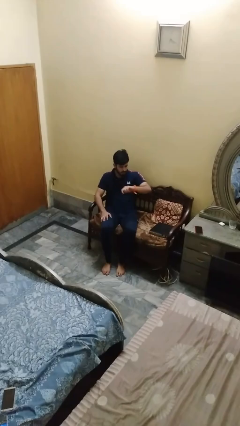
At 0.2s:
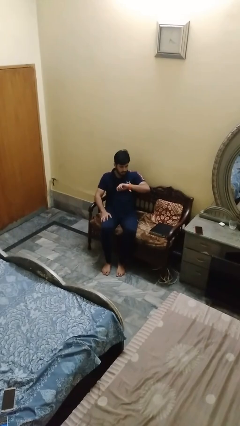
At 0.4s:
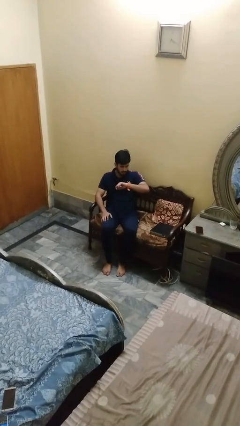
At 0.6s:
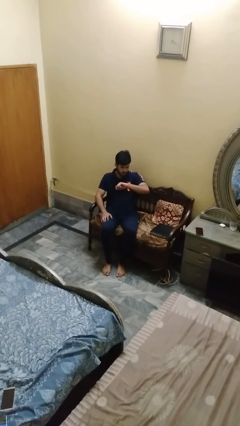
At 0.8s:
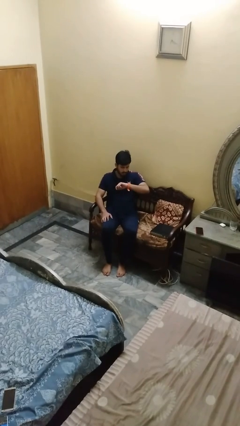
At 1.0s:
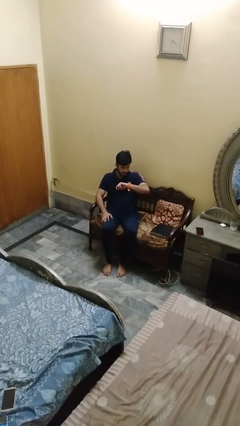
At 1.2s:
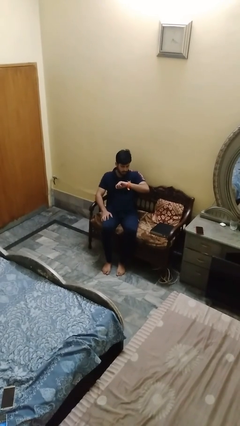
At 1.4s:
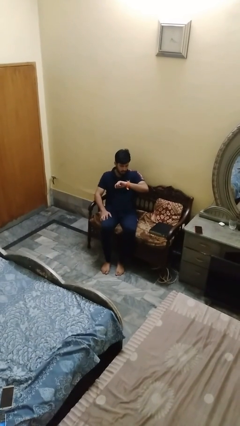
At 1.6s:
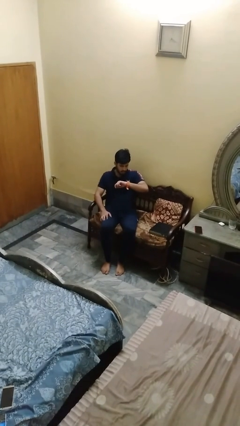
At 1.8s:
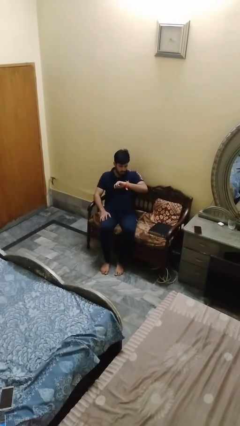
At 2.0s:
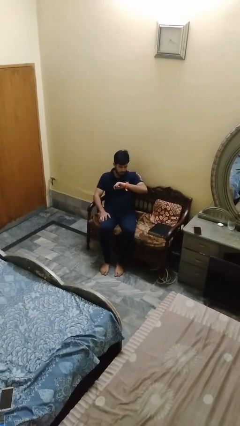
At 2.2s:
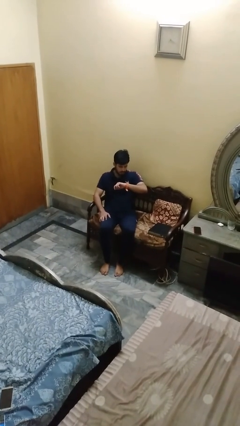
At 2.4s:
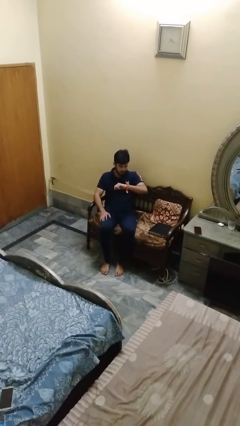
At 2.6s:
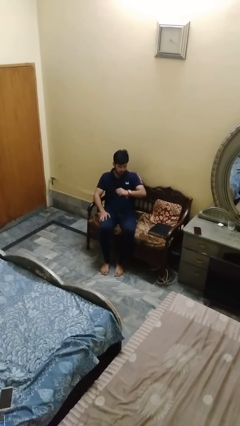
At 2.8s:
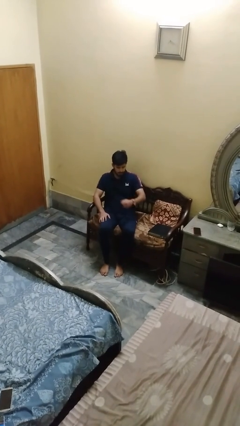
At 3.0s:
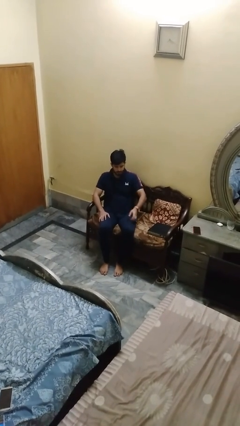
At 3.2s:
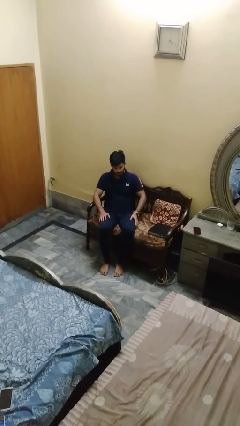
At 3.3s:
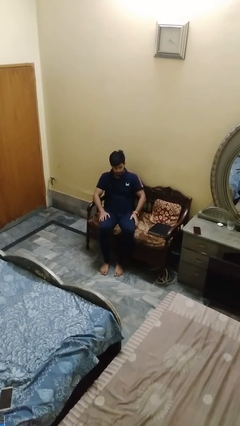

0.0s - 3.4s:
person looks at wristwatch

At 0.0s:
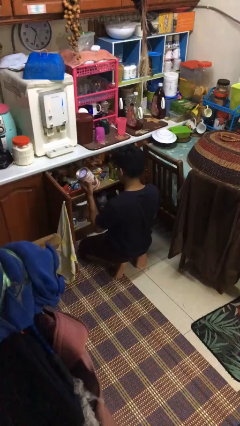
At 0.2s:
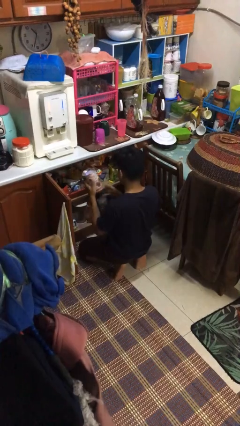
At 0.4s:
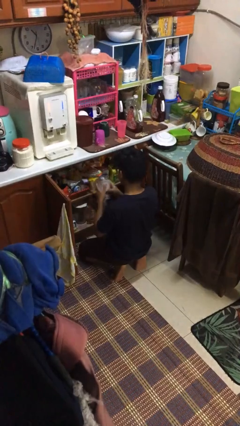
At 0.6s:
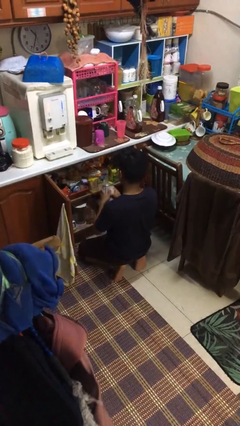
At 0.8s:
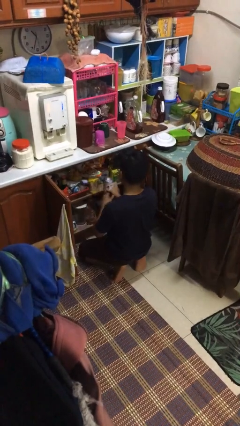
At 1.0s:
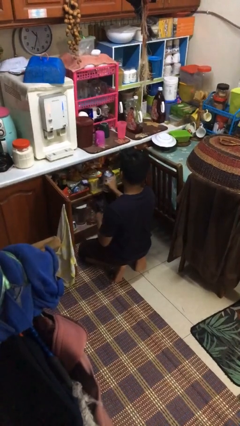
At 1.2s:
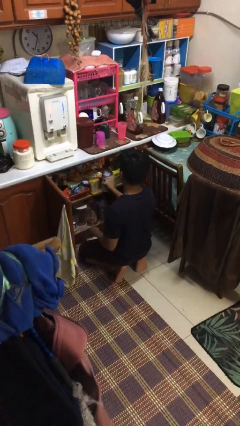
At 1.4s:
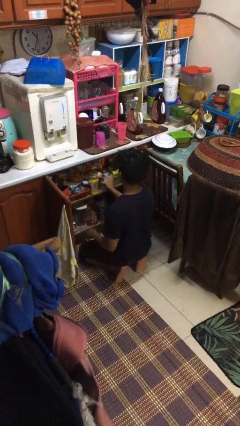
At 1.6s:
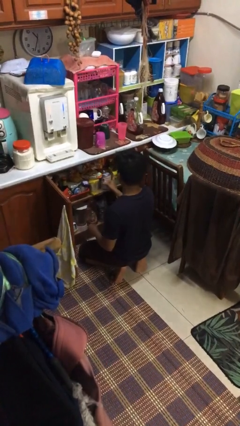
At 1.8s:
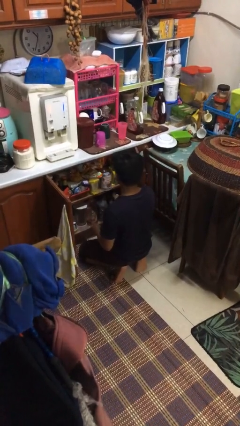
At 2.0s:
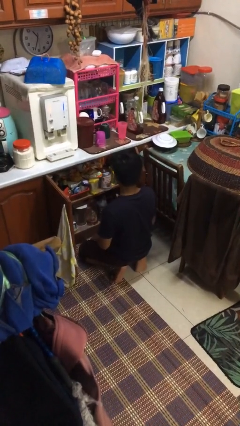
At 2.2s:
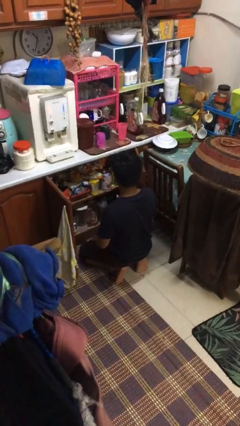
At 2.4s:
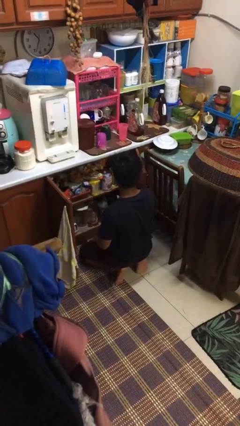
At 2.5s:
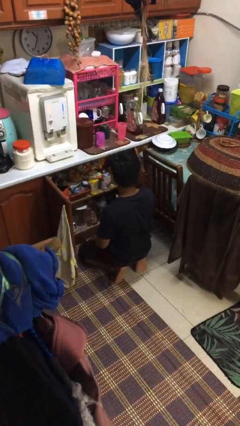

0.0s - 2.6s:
person puts object in cabinet

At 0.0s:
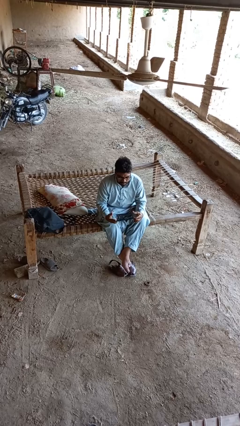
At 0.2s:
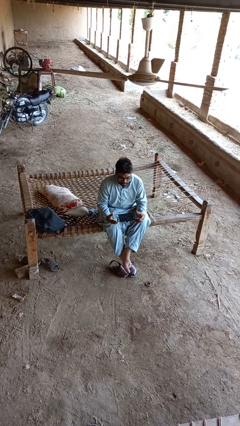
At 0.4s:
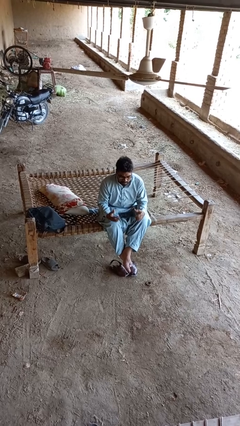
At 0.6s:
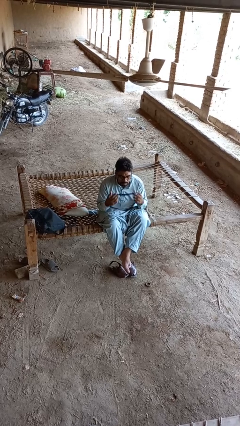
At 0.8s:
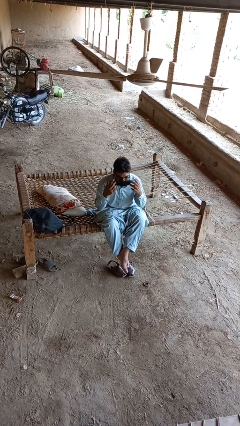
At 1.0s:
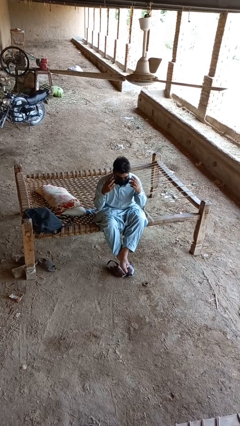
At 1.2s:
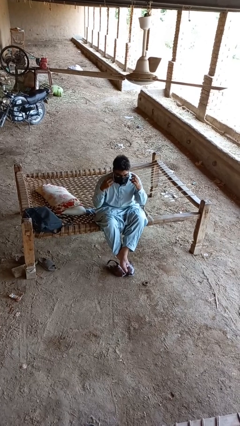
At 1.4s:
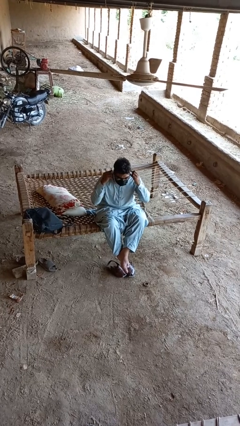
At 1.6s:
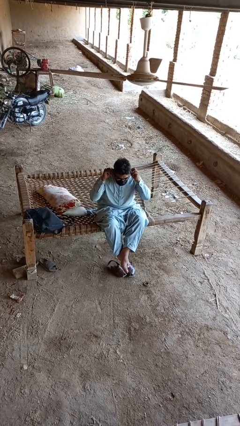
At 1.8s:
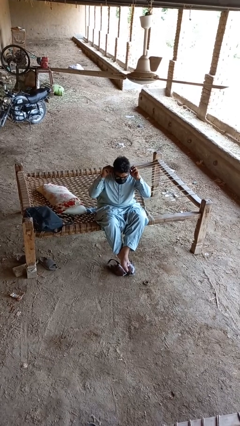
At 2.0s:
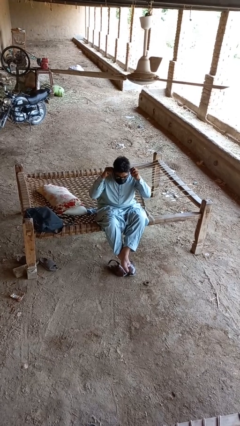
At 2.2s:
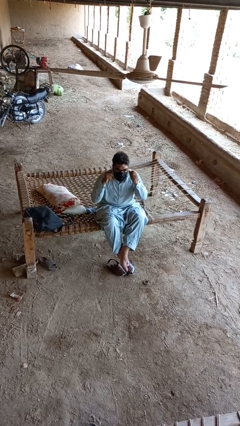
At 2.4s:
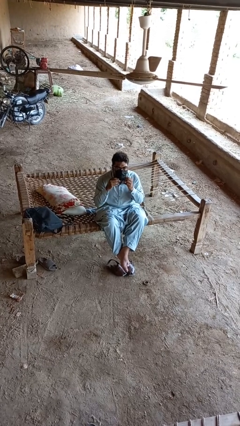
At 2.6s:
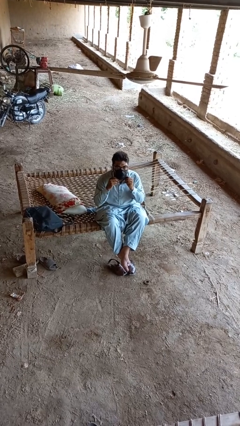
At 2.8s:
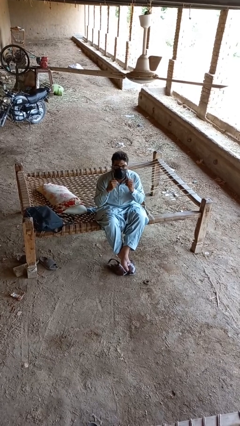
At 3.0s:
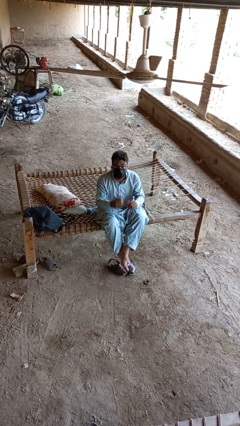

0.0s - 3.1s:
person puts on facemask

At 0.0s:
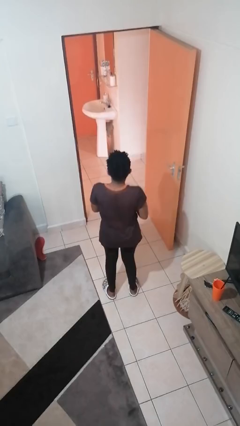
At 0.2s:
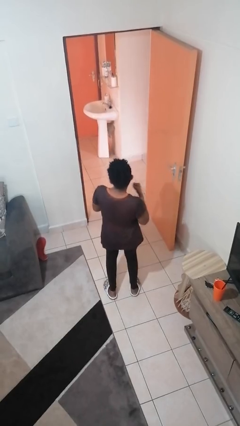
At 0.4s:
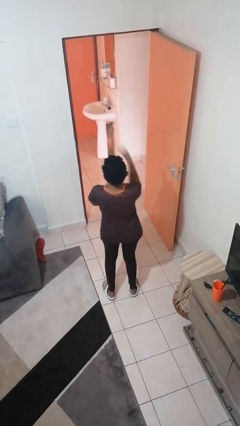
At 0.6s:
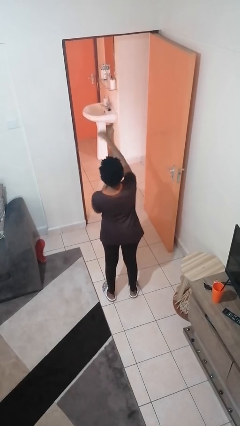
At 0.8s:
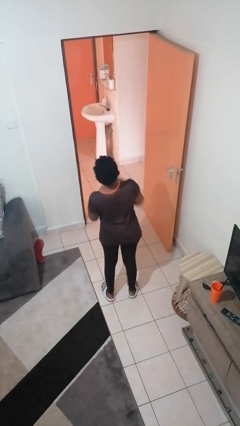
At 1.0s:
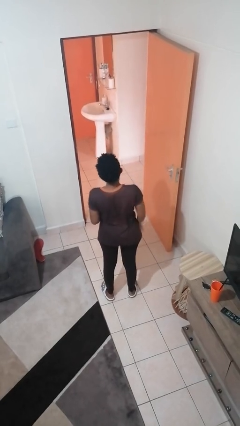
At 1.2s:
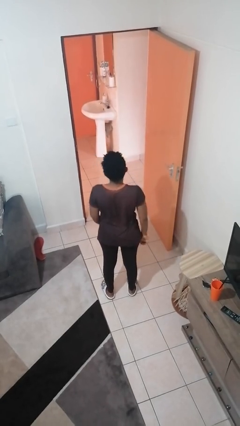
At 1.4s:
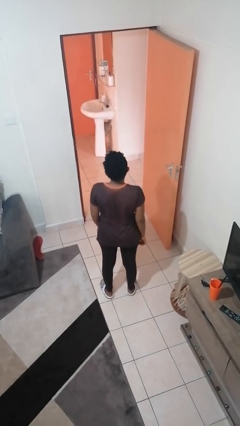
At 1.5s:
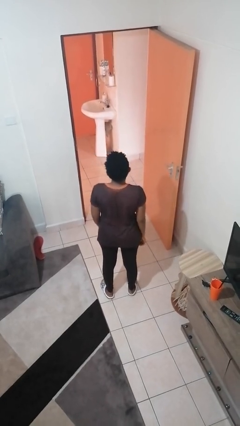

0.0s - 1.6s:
person punches

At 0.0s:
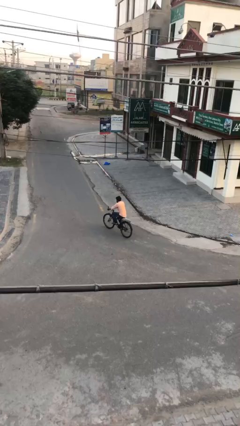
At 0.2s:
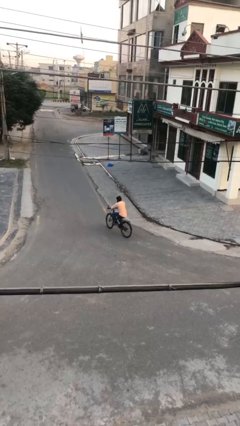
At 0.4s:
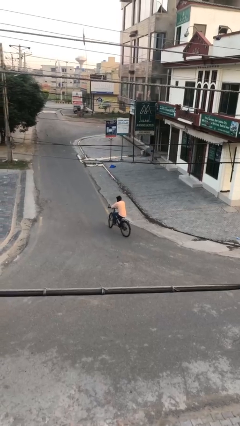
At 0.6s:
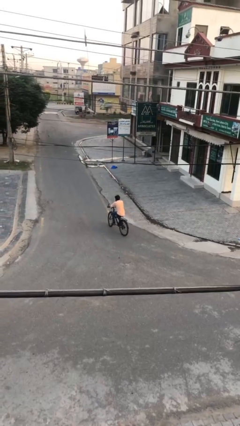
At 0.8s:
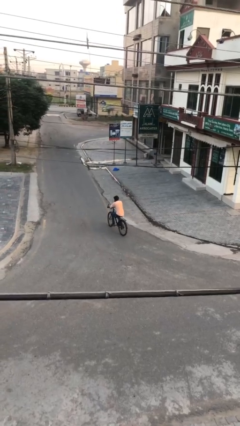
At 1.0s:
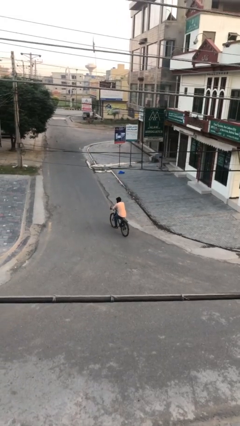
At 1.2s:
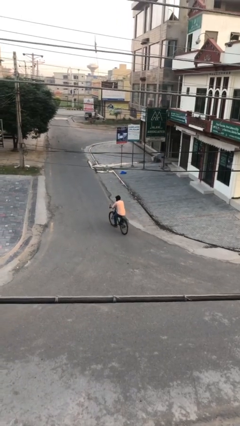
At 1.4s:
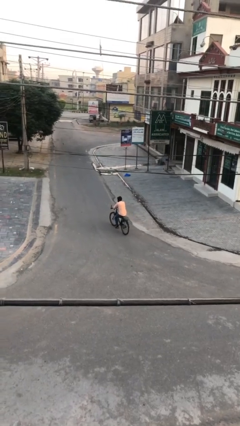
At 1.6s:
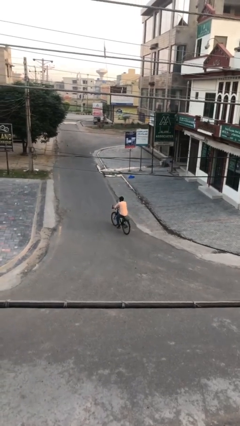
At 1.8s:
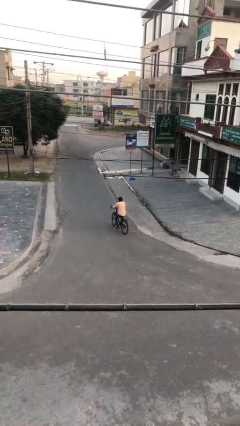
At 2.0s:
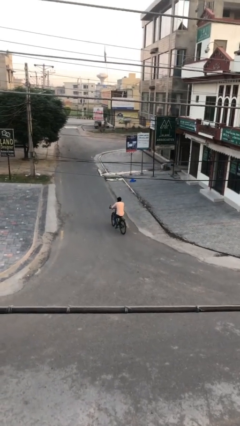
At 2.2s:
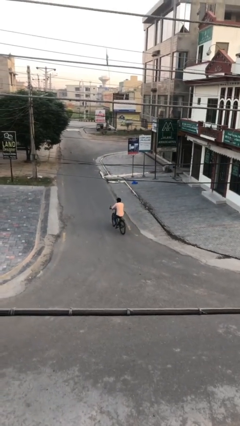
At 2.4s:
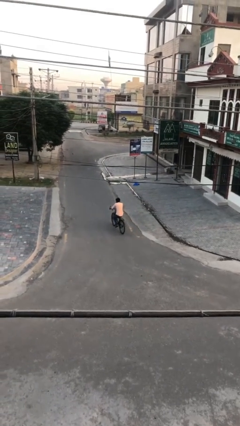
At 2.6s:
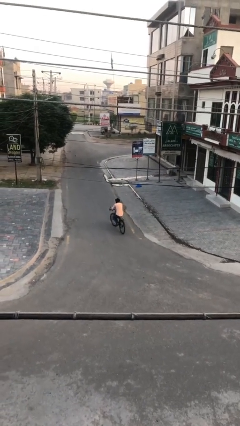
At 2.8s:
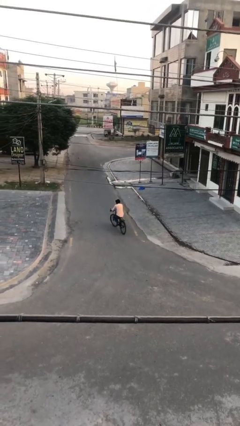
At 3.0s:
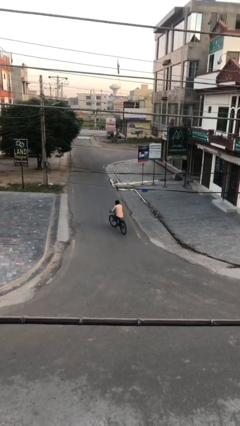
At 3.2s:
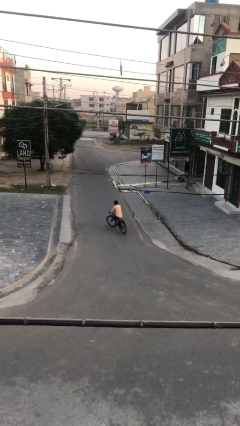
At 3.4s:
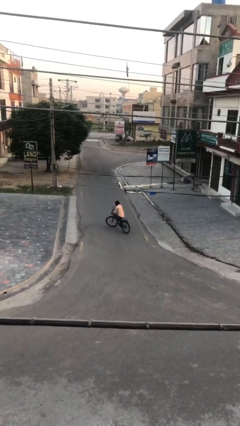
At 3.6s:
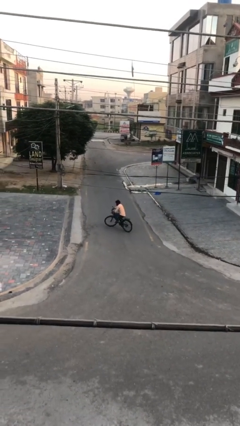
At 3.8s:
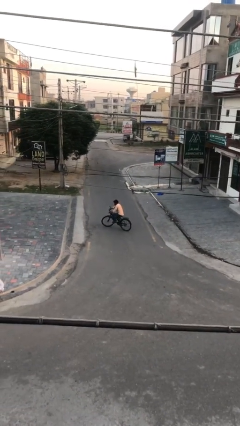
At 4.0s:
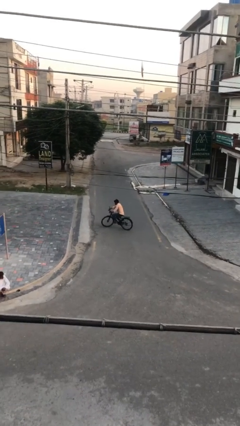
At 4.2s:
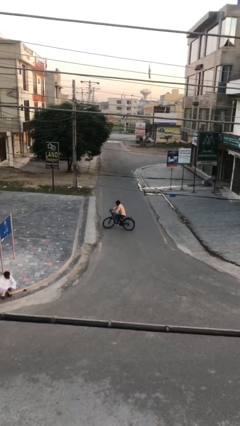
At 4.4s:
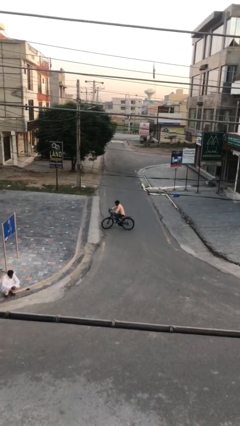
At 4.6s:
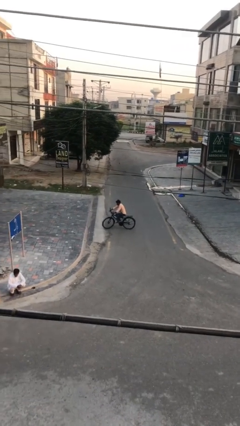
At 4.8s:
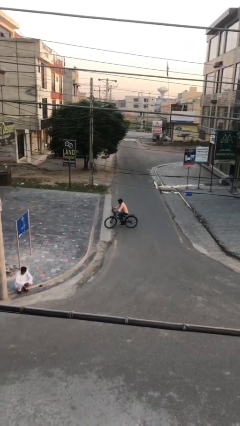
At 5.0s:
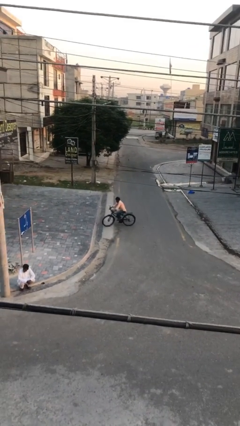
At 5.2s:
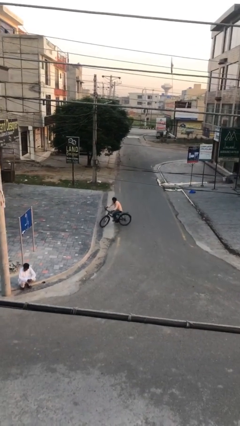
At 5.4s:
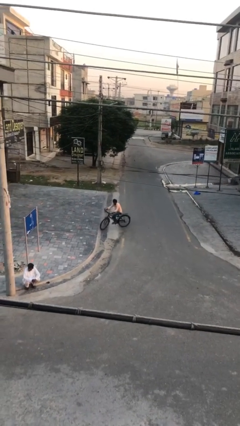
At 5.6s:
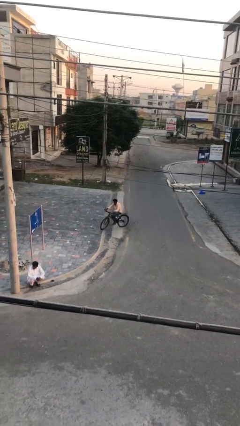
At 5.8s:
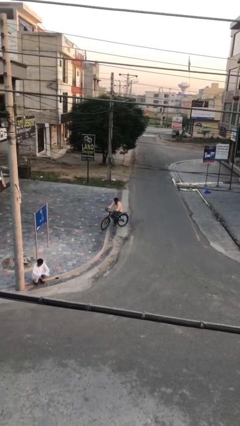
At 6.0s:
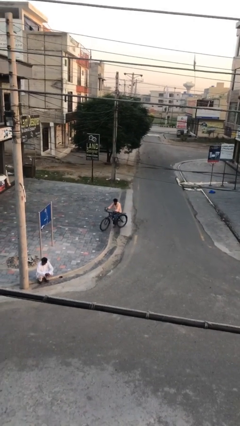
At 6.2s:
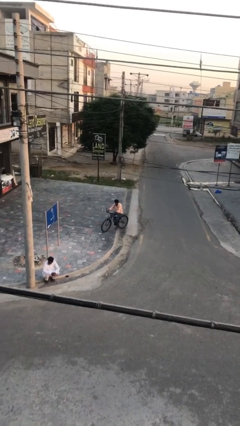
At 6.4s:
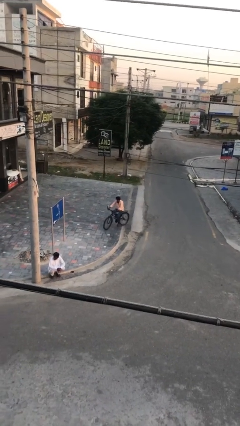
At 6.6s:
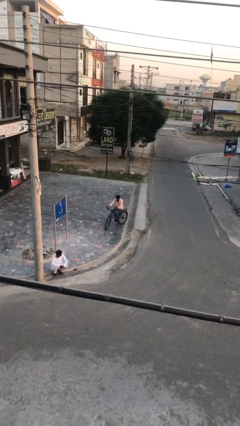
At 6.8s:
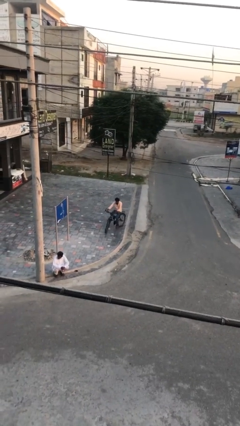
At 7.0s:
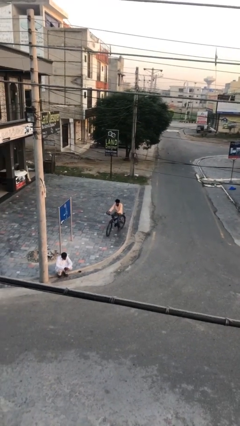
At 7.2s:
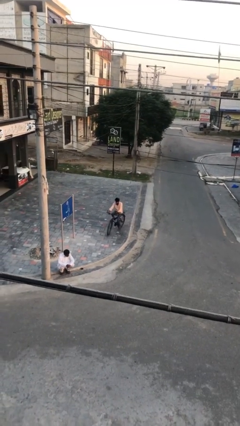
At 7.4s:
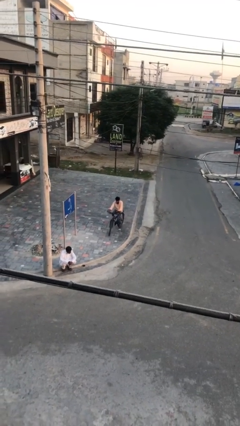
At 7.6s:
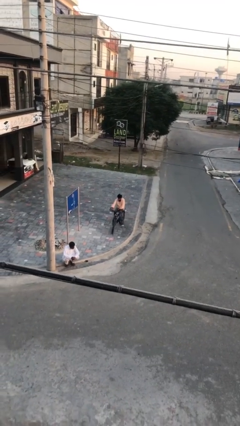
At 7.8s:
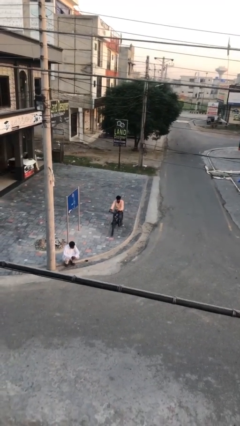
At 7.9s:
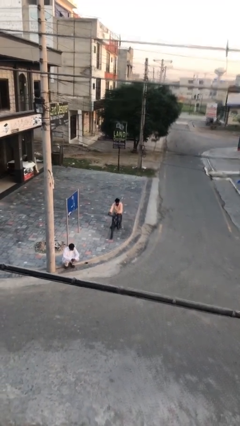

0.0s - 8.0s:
person rides bicycle
